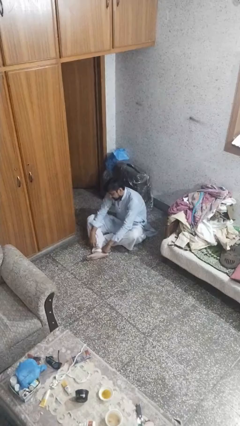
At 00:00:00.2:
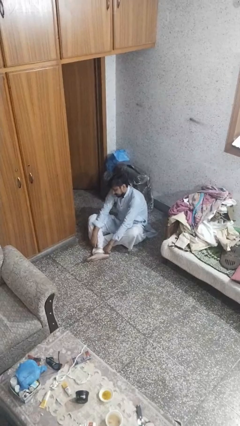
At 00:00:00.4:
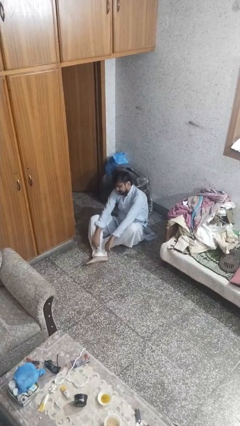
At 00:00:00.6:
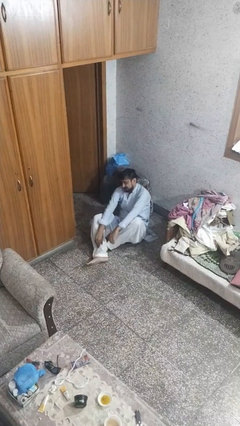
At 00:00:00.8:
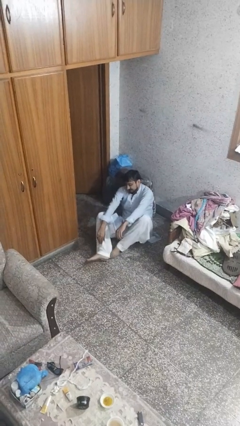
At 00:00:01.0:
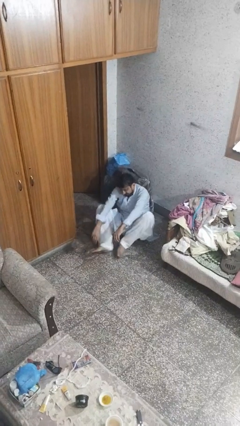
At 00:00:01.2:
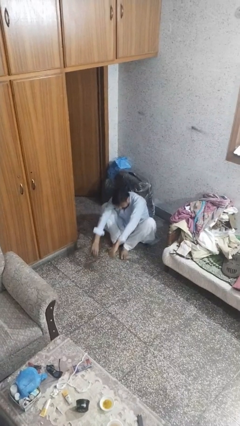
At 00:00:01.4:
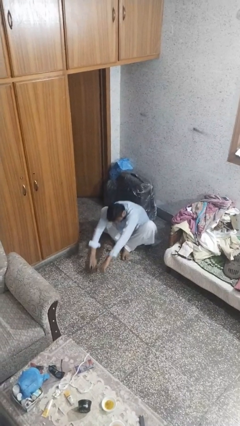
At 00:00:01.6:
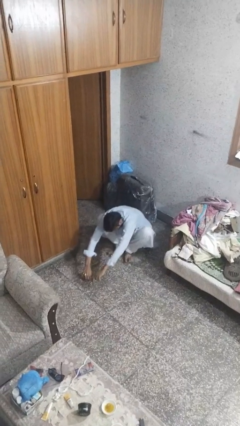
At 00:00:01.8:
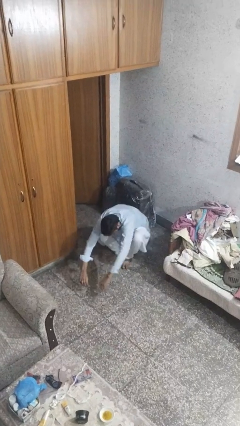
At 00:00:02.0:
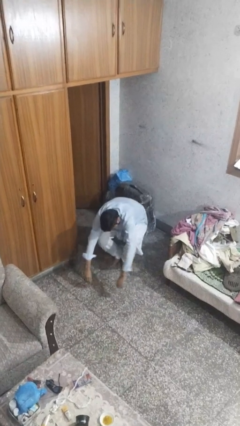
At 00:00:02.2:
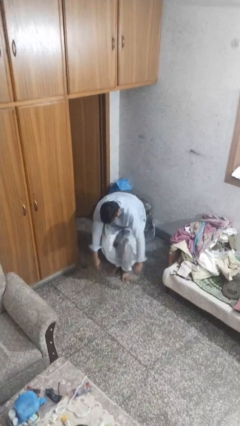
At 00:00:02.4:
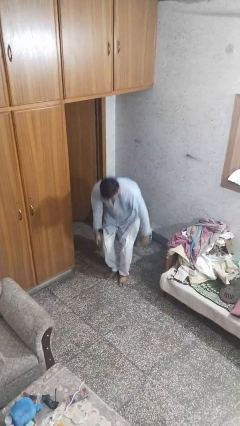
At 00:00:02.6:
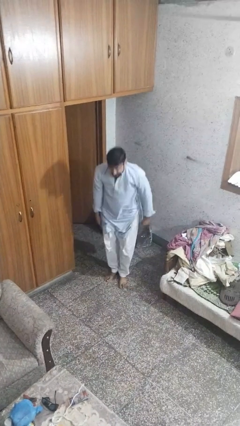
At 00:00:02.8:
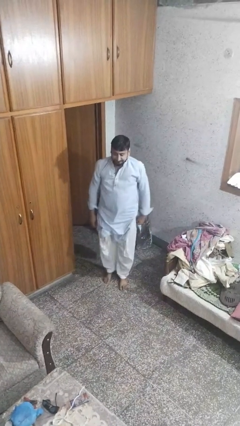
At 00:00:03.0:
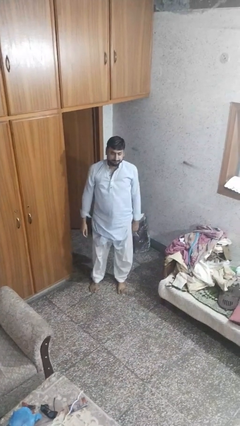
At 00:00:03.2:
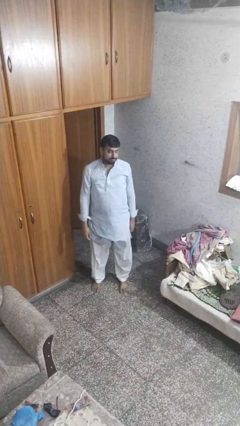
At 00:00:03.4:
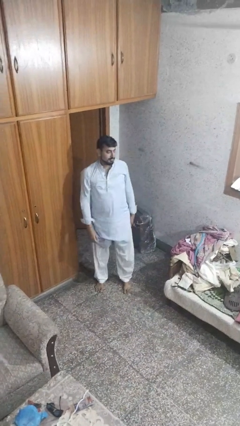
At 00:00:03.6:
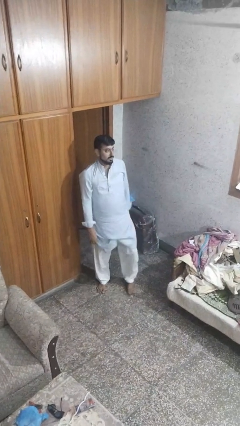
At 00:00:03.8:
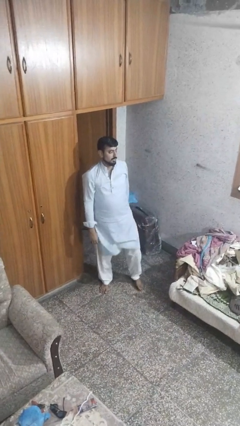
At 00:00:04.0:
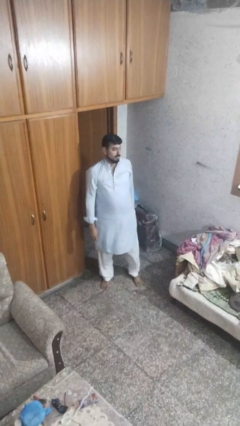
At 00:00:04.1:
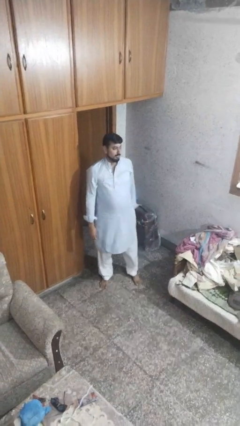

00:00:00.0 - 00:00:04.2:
person stands up from floor

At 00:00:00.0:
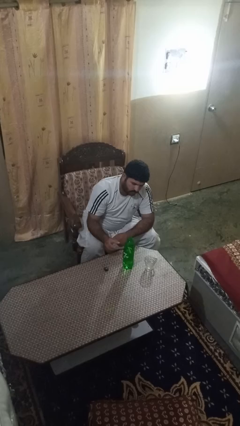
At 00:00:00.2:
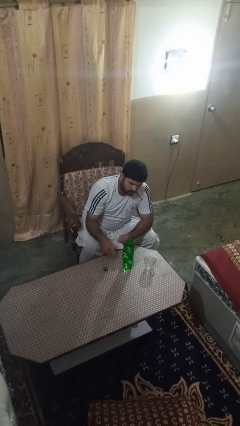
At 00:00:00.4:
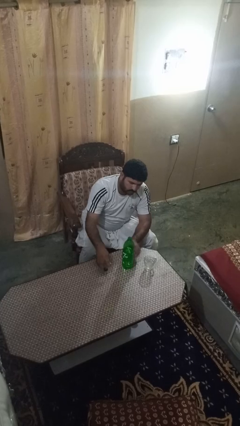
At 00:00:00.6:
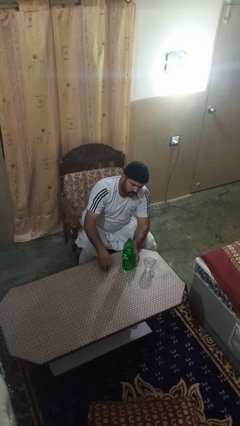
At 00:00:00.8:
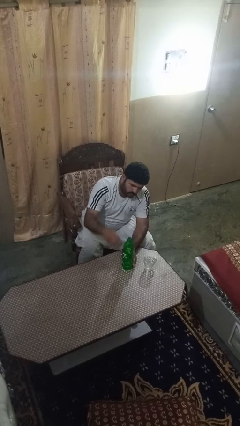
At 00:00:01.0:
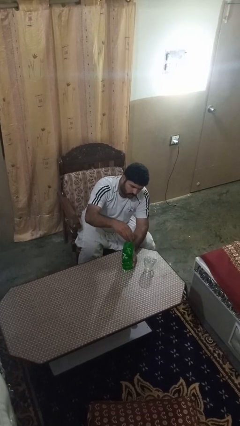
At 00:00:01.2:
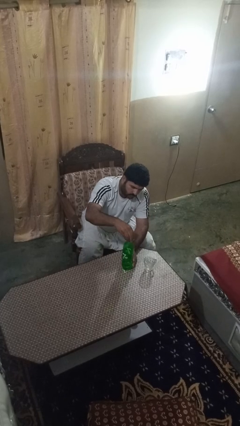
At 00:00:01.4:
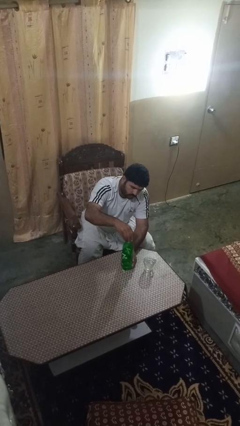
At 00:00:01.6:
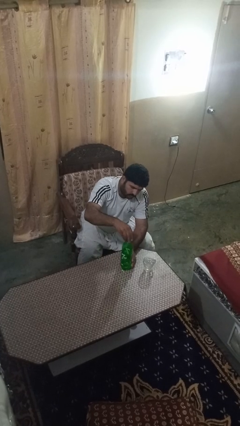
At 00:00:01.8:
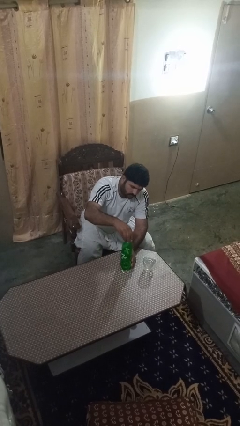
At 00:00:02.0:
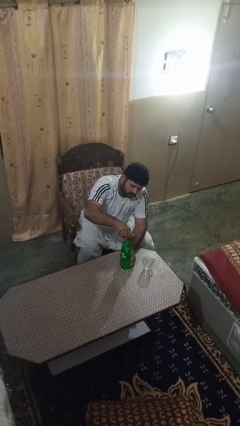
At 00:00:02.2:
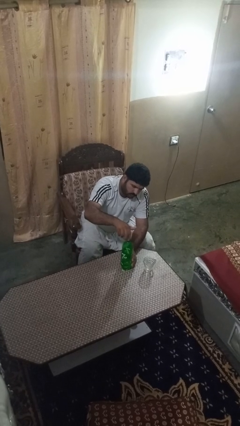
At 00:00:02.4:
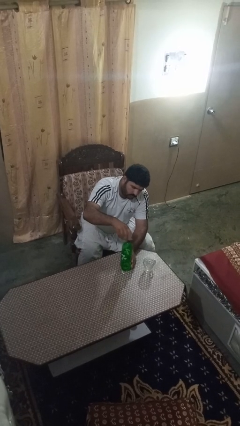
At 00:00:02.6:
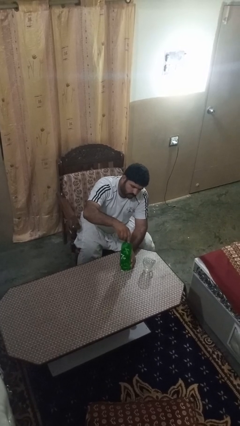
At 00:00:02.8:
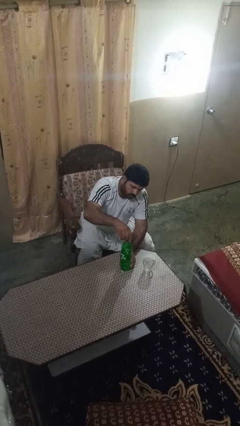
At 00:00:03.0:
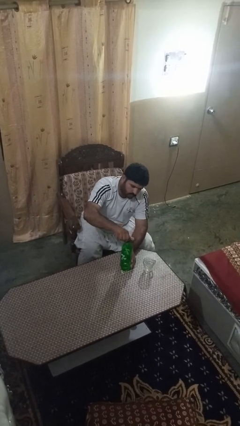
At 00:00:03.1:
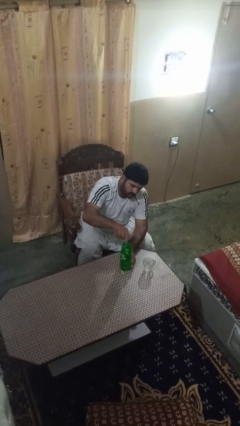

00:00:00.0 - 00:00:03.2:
person screws lid to bottle

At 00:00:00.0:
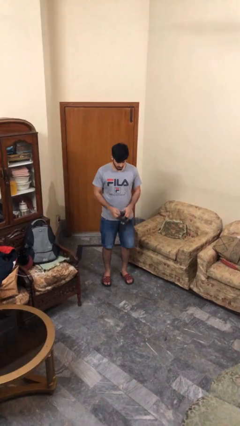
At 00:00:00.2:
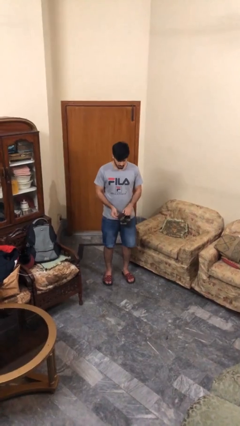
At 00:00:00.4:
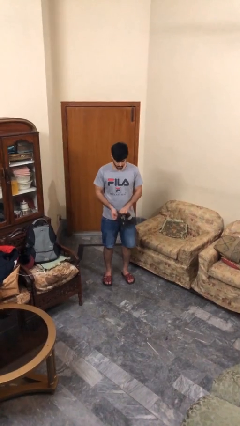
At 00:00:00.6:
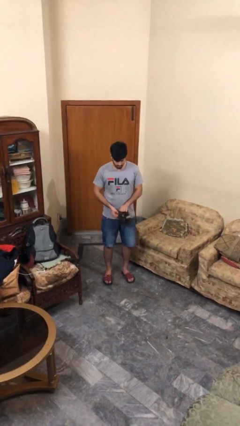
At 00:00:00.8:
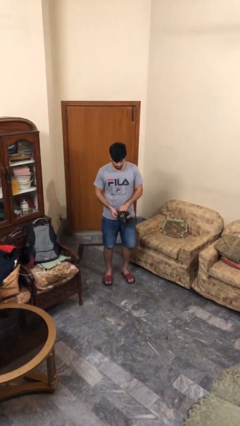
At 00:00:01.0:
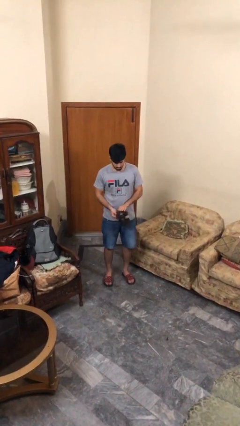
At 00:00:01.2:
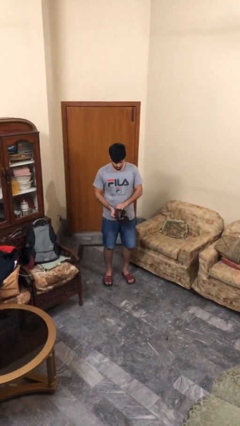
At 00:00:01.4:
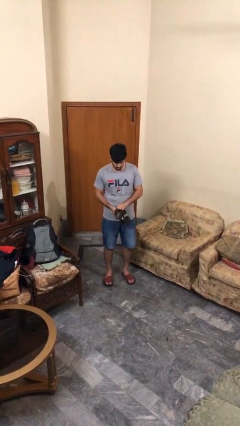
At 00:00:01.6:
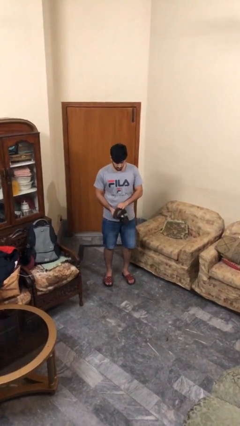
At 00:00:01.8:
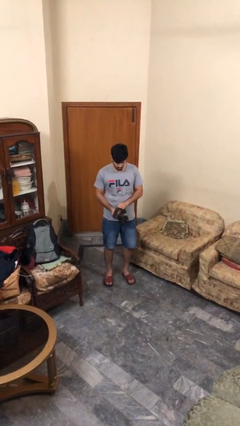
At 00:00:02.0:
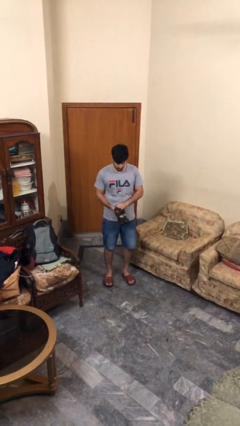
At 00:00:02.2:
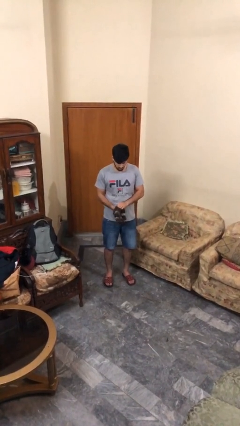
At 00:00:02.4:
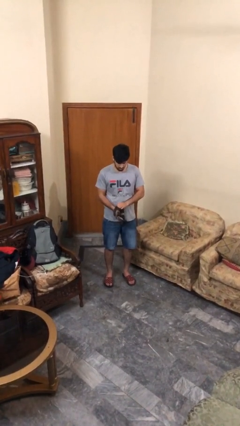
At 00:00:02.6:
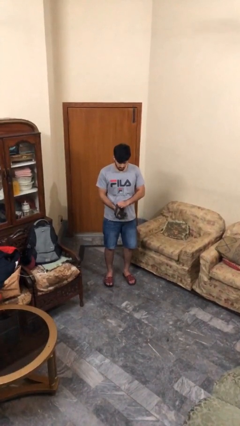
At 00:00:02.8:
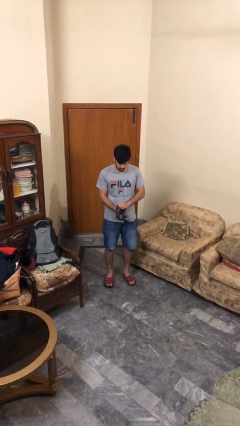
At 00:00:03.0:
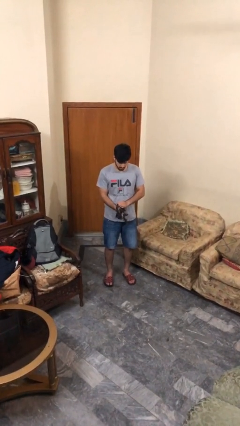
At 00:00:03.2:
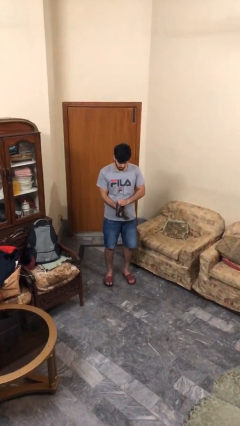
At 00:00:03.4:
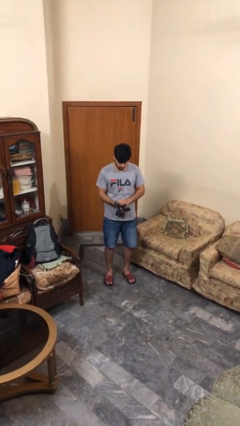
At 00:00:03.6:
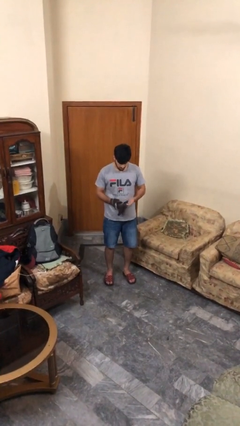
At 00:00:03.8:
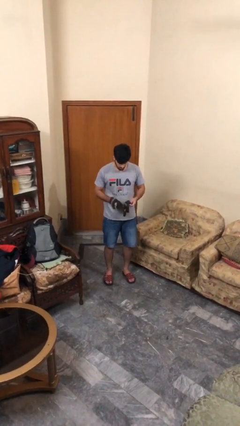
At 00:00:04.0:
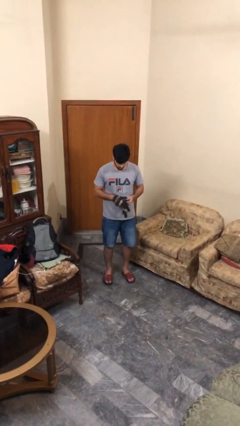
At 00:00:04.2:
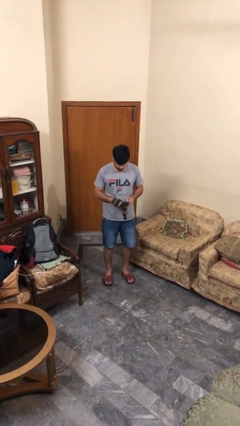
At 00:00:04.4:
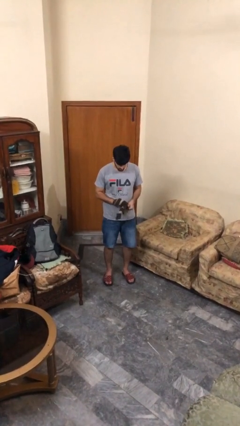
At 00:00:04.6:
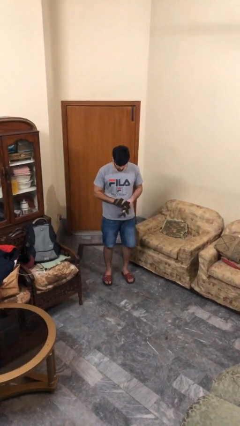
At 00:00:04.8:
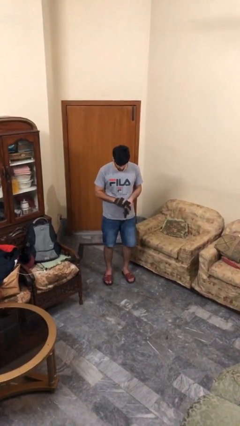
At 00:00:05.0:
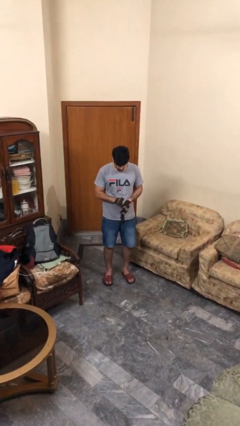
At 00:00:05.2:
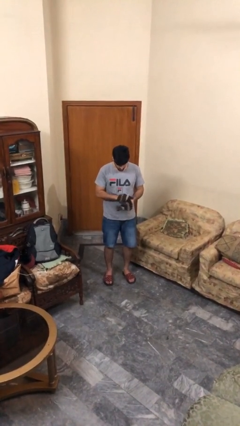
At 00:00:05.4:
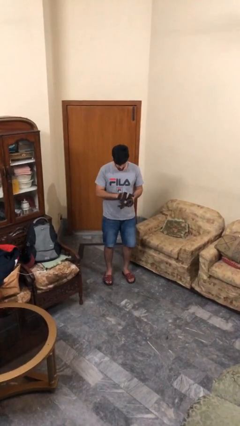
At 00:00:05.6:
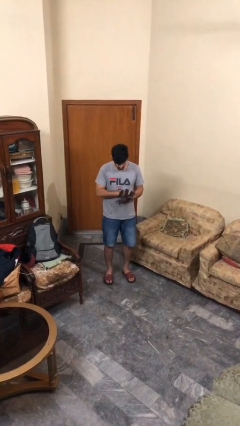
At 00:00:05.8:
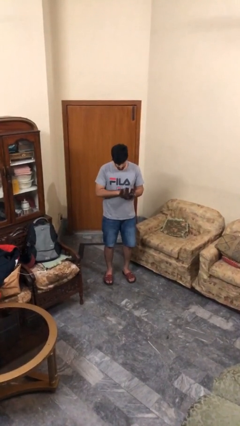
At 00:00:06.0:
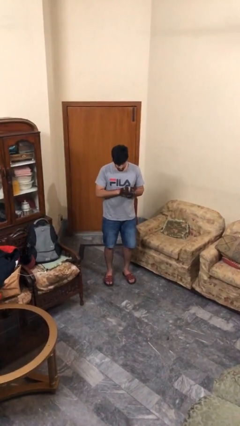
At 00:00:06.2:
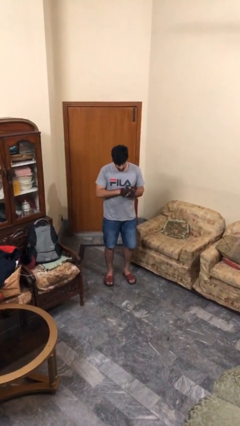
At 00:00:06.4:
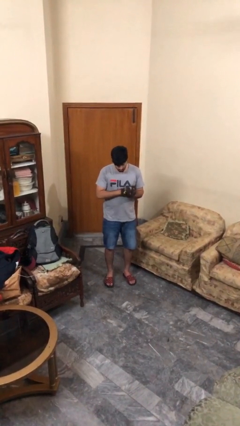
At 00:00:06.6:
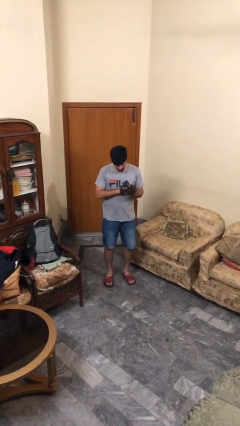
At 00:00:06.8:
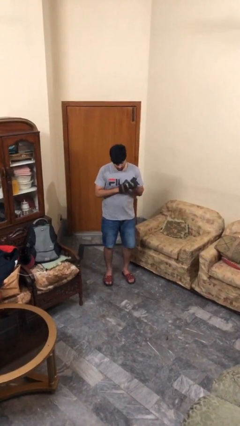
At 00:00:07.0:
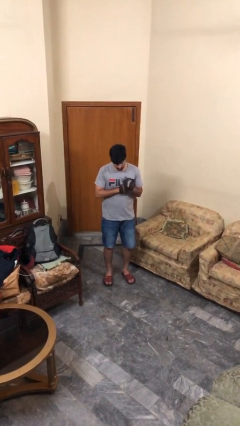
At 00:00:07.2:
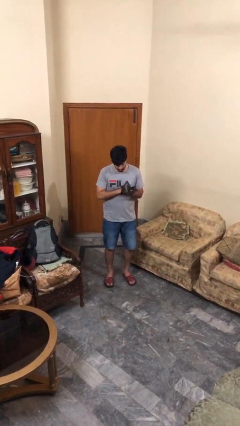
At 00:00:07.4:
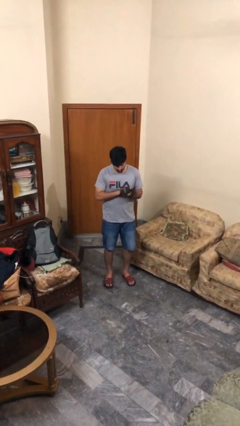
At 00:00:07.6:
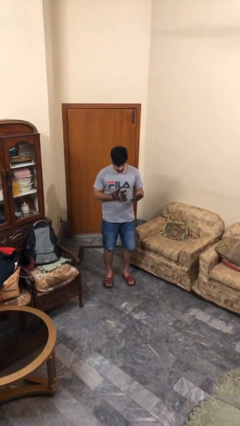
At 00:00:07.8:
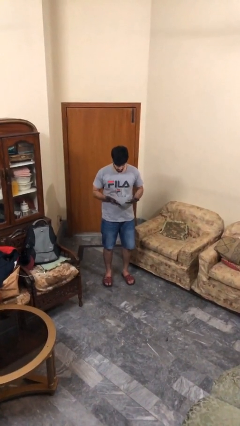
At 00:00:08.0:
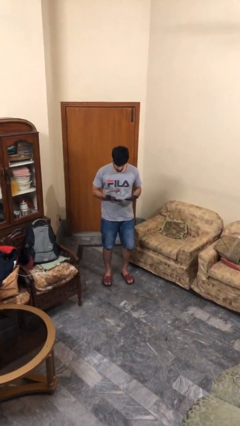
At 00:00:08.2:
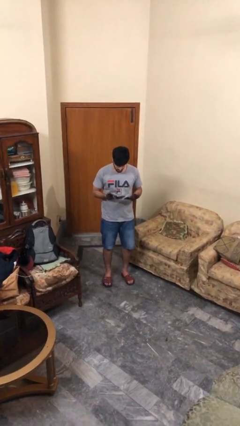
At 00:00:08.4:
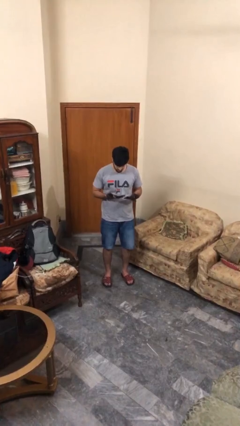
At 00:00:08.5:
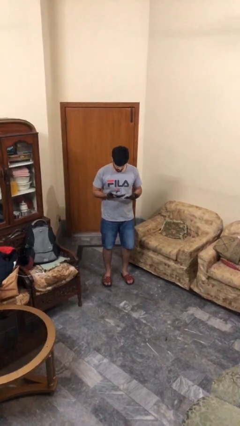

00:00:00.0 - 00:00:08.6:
person puts on gloves

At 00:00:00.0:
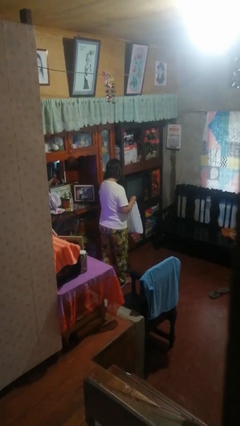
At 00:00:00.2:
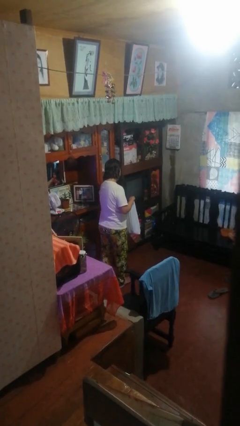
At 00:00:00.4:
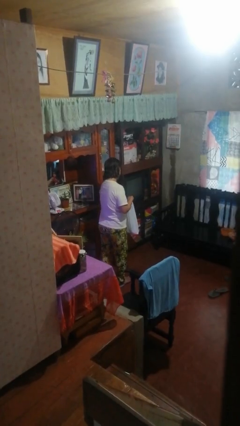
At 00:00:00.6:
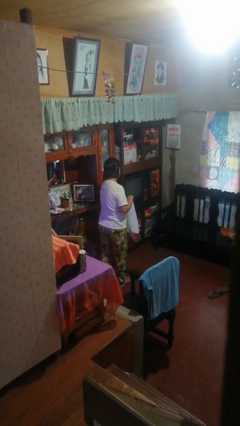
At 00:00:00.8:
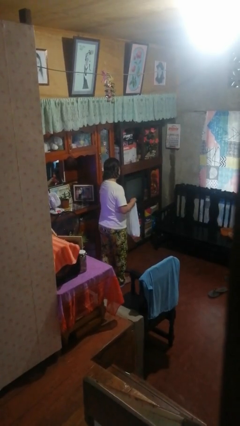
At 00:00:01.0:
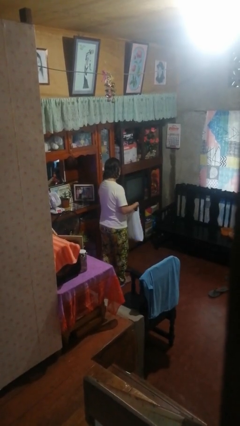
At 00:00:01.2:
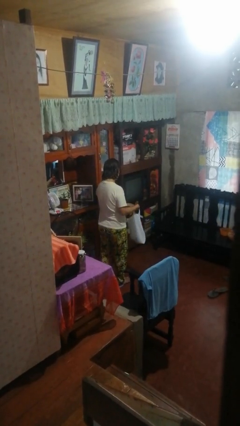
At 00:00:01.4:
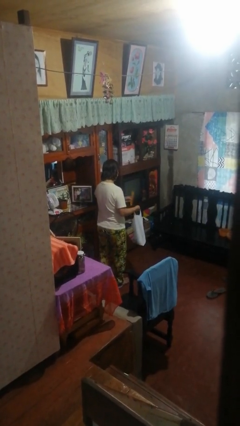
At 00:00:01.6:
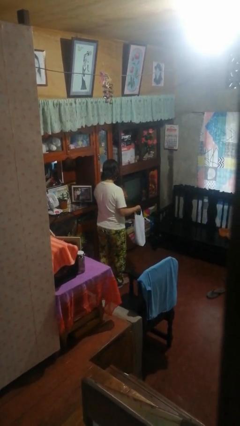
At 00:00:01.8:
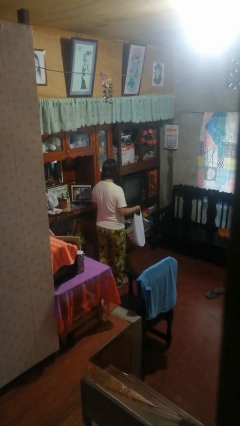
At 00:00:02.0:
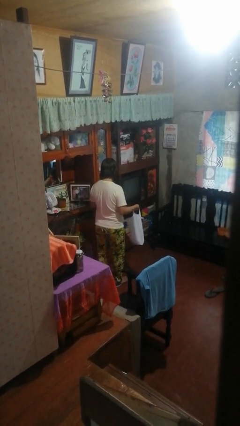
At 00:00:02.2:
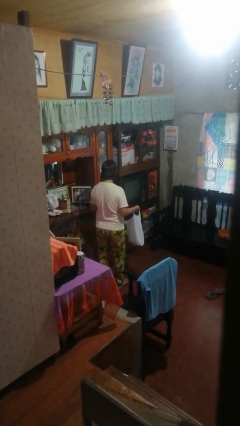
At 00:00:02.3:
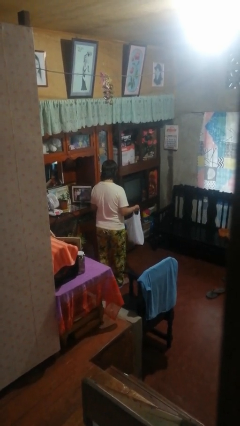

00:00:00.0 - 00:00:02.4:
person takes object from bag
